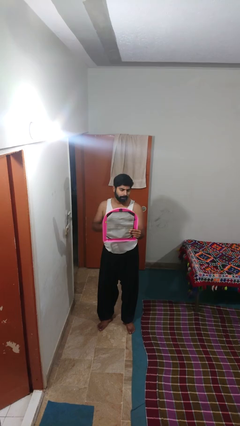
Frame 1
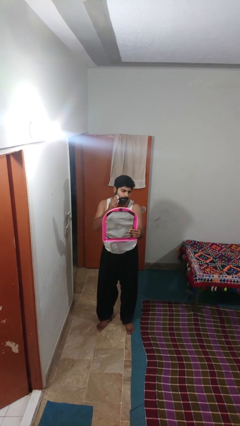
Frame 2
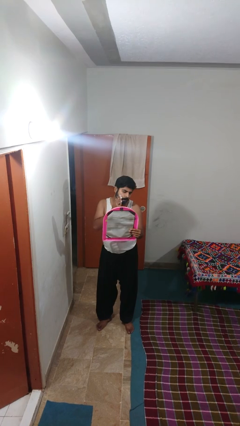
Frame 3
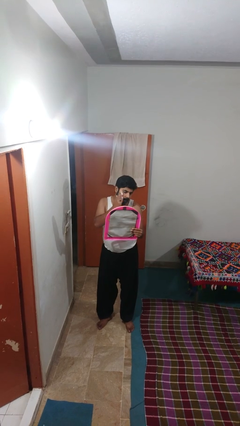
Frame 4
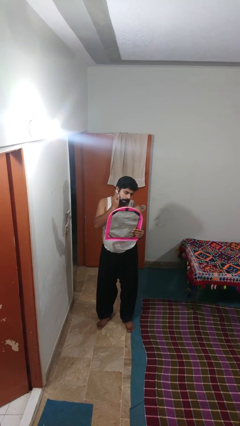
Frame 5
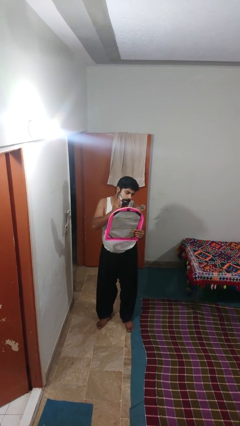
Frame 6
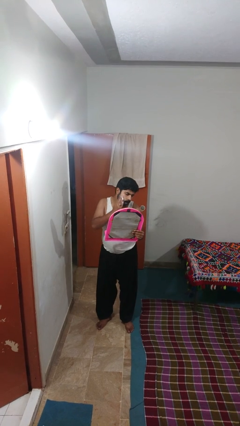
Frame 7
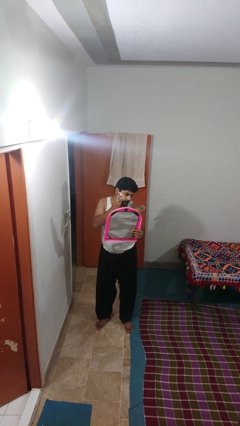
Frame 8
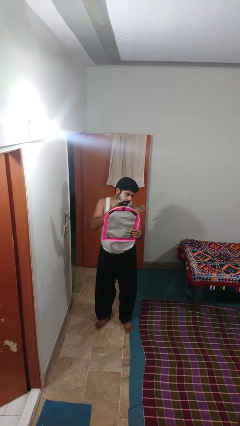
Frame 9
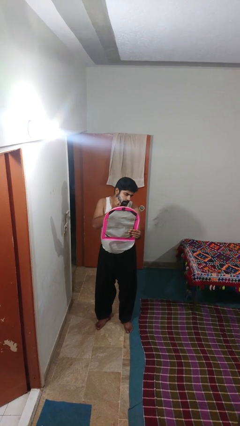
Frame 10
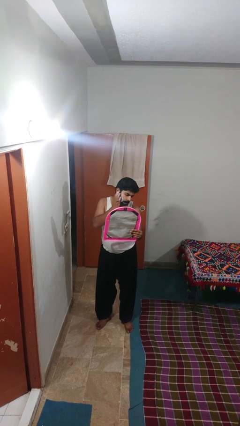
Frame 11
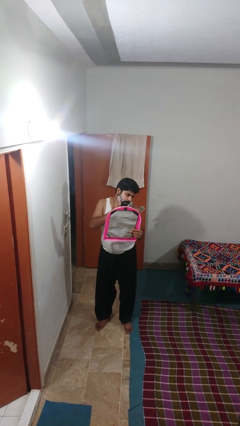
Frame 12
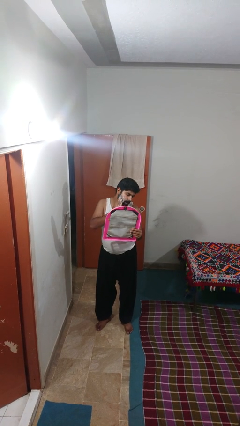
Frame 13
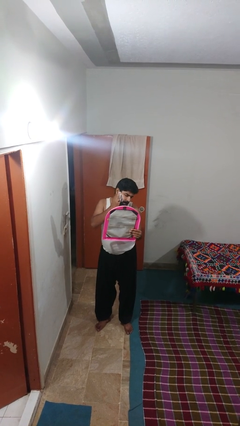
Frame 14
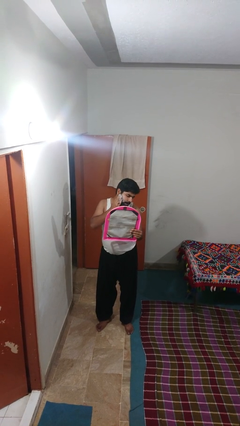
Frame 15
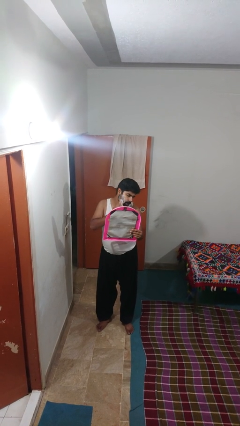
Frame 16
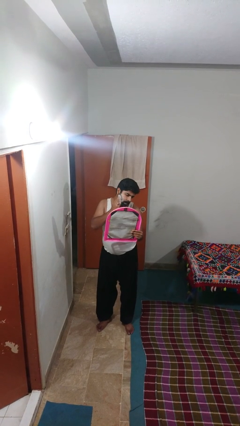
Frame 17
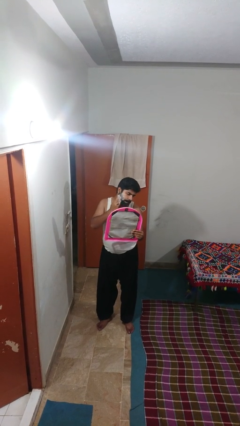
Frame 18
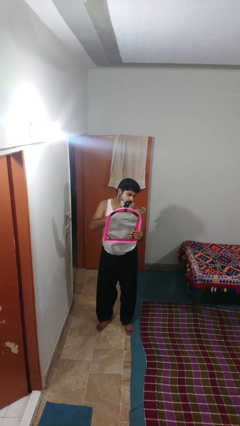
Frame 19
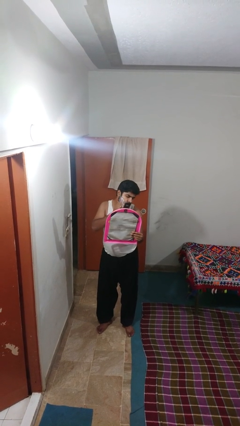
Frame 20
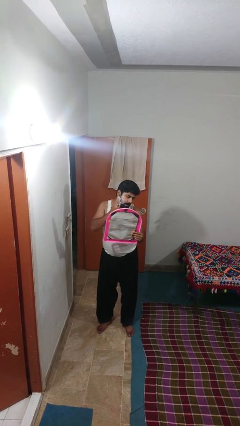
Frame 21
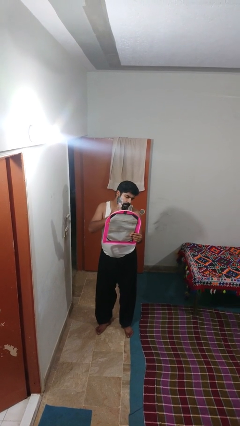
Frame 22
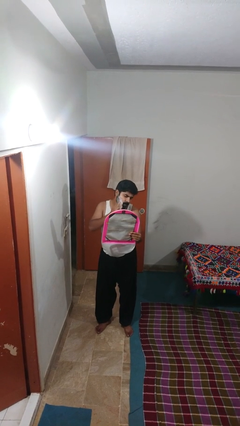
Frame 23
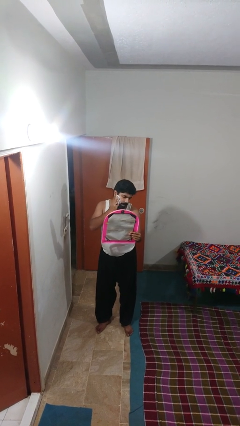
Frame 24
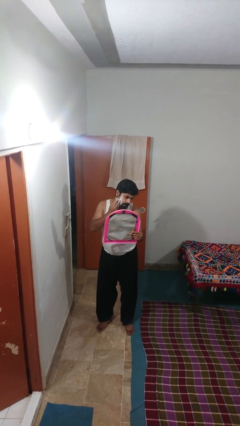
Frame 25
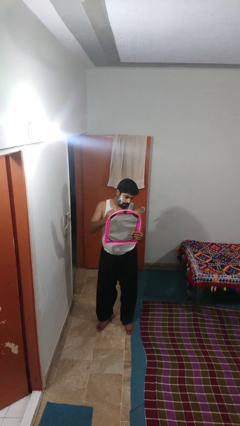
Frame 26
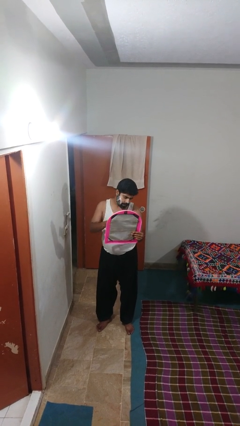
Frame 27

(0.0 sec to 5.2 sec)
person applies shaving cream

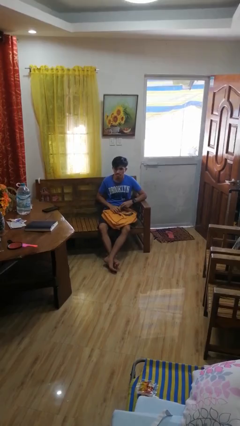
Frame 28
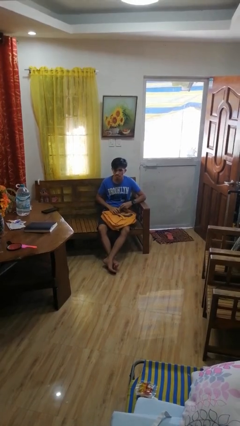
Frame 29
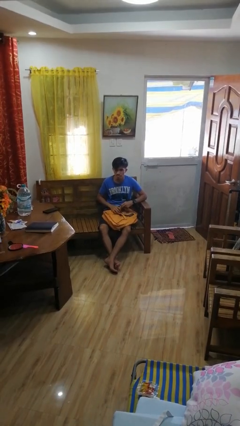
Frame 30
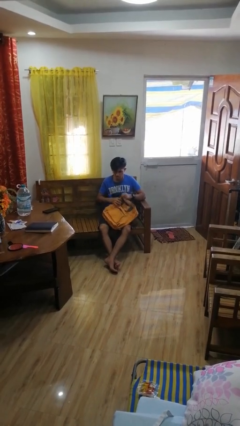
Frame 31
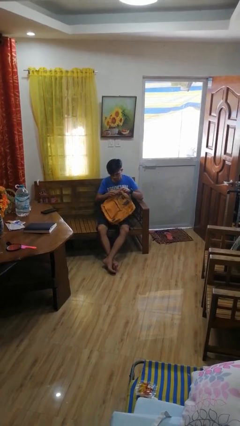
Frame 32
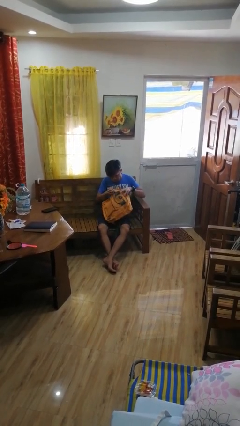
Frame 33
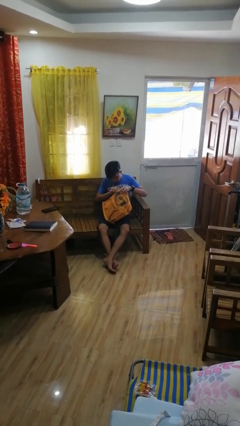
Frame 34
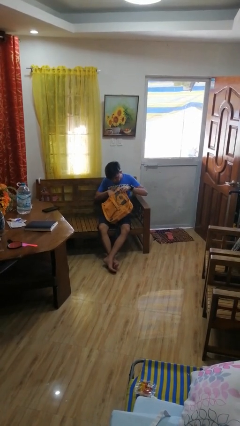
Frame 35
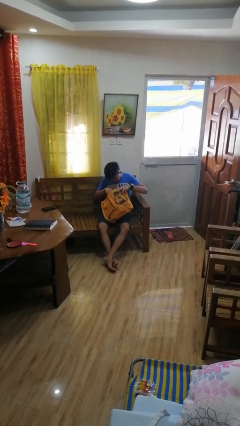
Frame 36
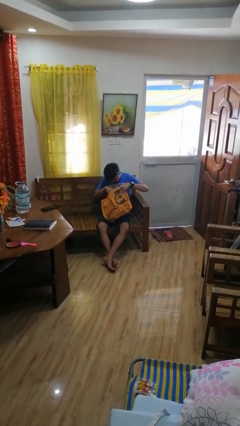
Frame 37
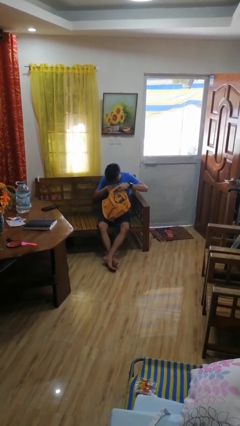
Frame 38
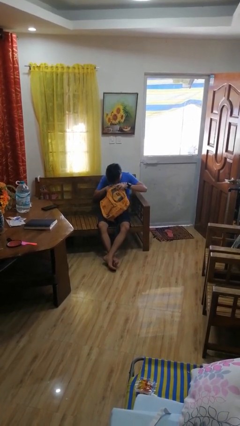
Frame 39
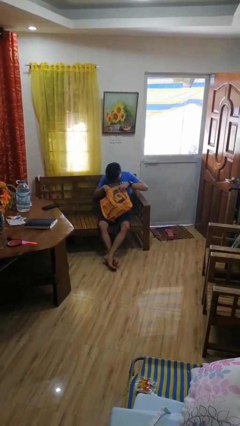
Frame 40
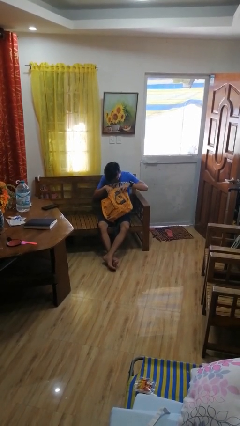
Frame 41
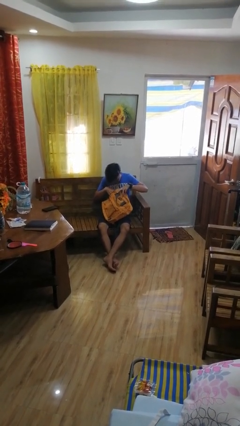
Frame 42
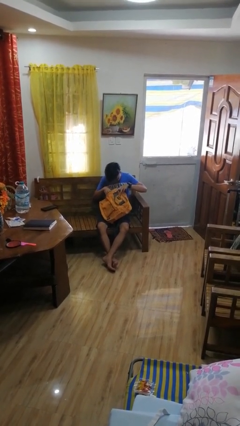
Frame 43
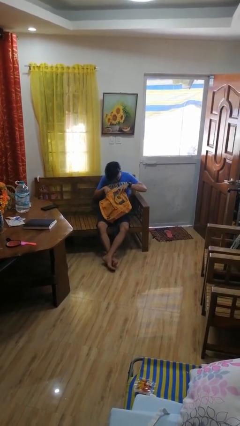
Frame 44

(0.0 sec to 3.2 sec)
person searches in backpack

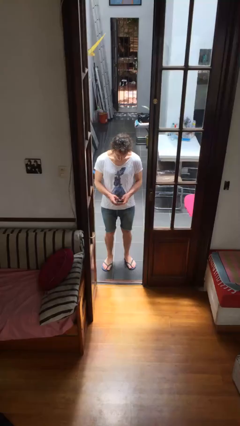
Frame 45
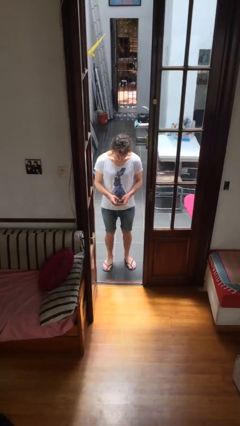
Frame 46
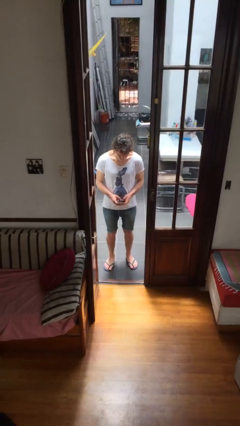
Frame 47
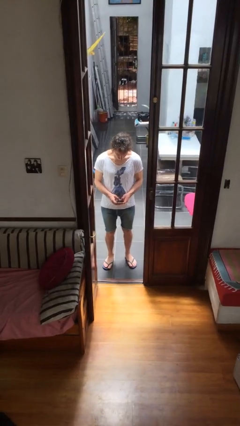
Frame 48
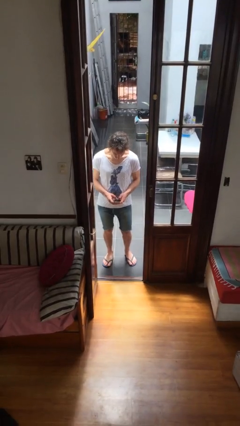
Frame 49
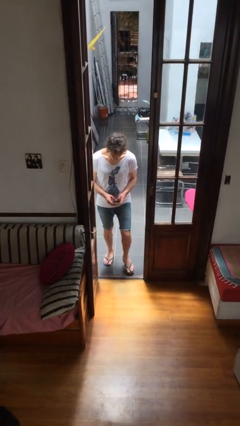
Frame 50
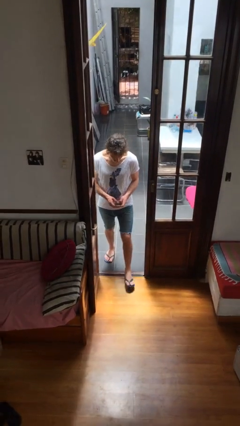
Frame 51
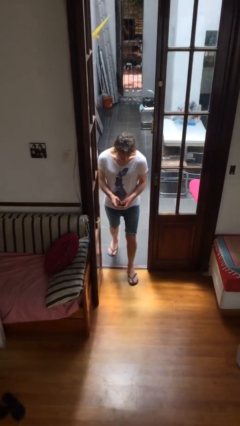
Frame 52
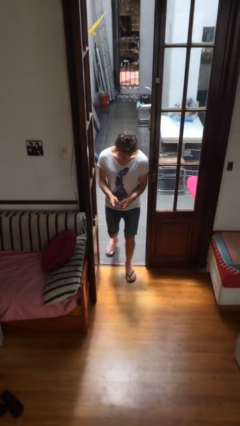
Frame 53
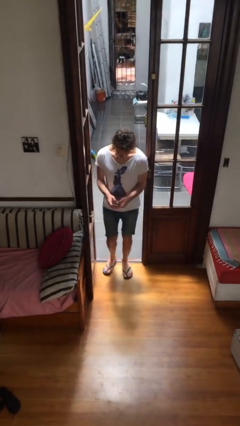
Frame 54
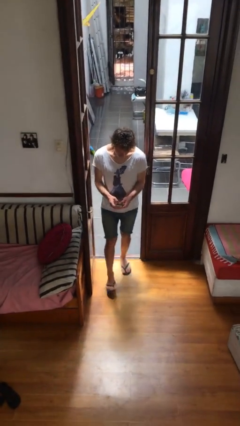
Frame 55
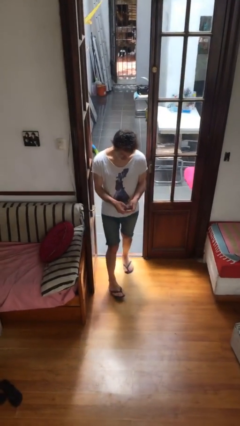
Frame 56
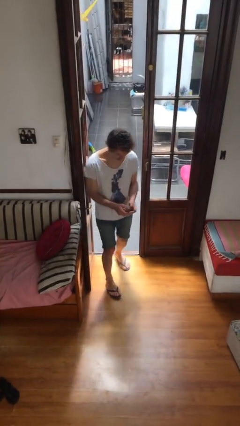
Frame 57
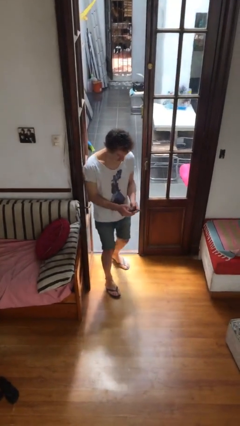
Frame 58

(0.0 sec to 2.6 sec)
person enters scene through structure

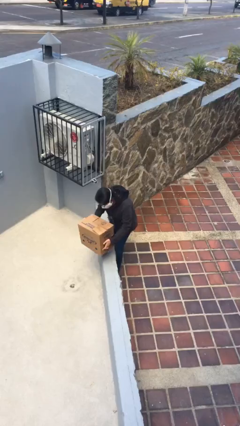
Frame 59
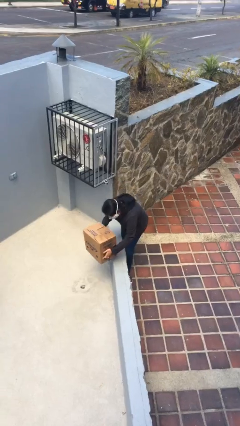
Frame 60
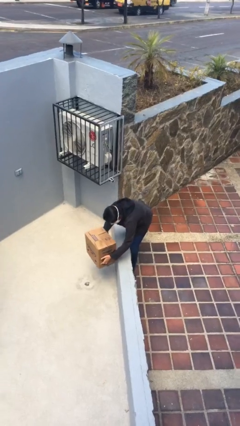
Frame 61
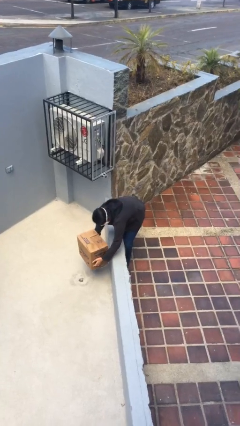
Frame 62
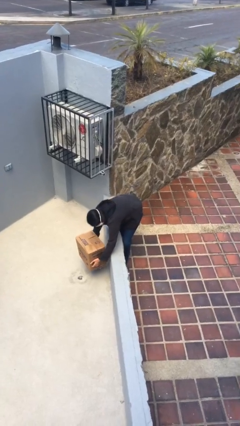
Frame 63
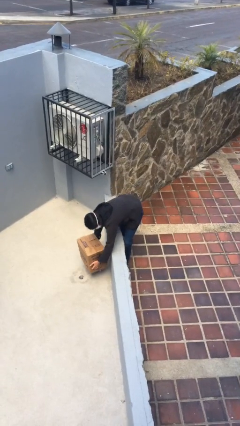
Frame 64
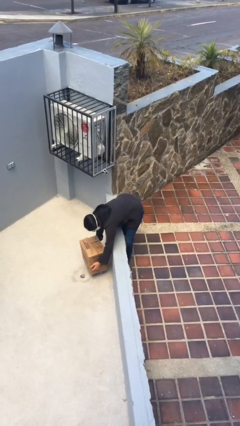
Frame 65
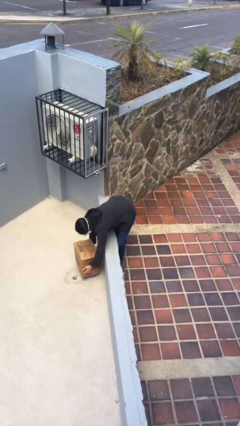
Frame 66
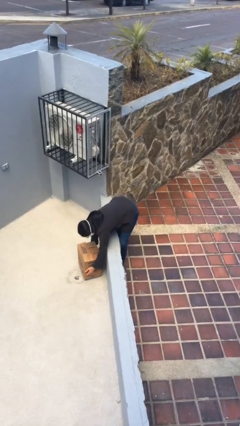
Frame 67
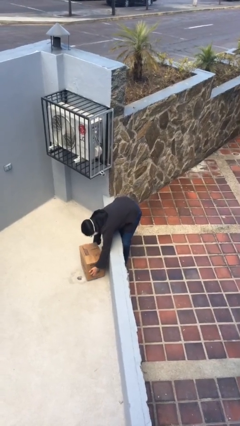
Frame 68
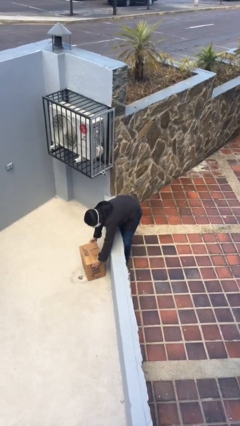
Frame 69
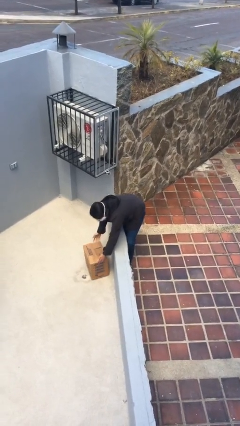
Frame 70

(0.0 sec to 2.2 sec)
person puts down object on floor

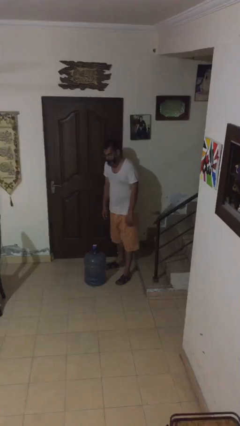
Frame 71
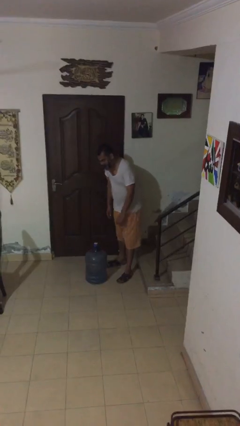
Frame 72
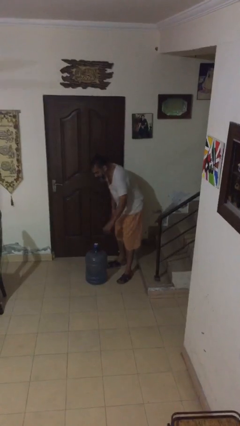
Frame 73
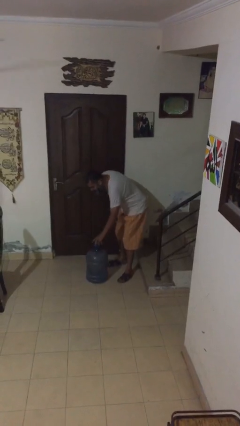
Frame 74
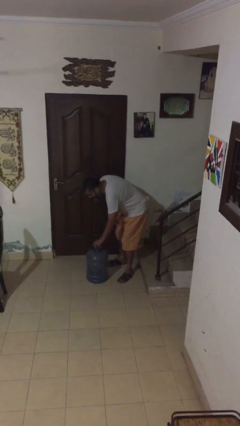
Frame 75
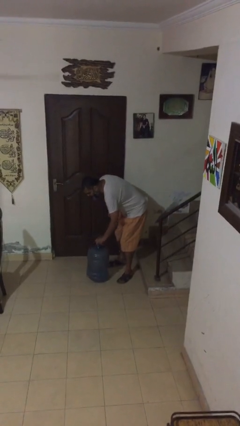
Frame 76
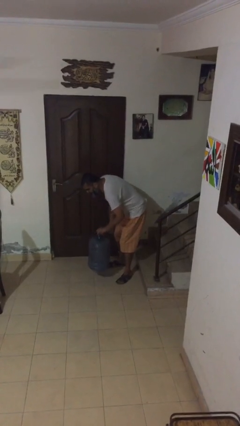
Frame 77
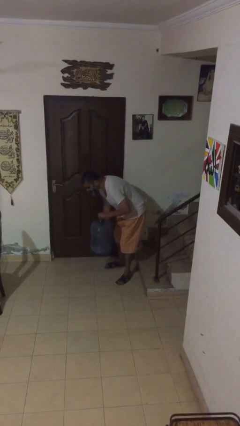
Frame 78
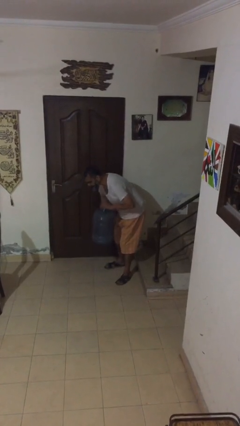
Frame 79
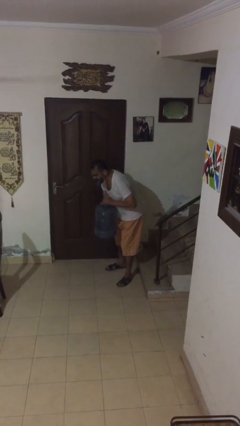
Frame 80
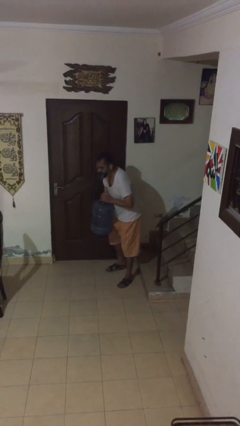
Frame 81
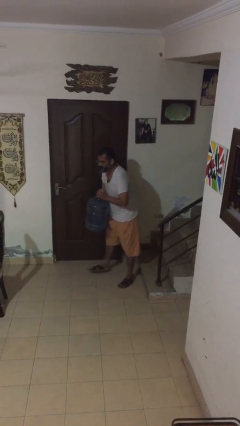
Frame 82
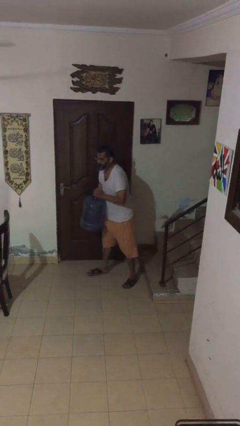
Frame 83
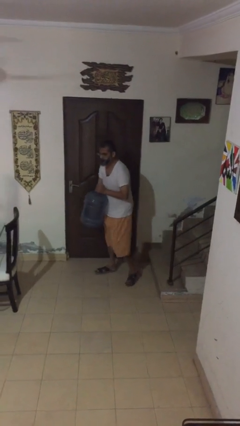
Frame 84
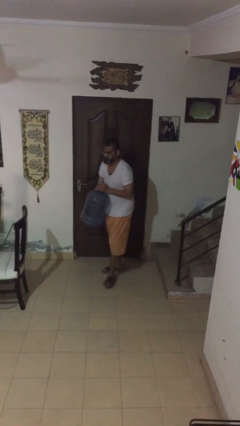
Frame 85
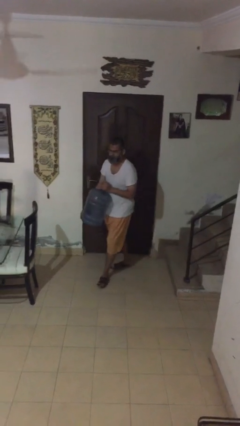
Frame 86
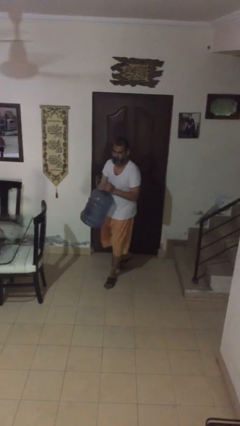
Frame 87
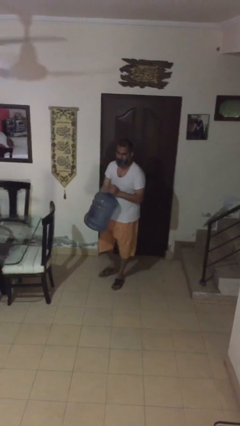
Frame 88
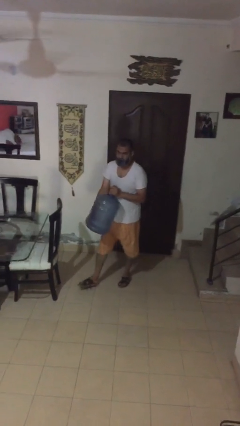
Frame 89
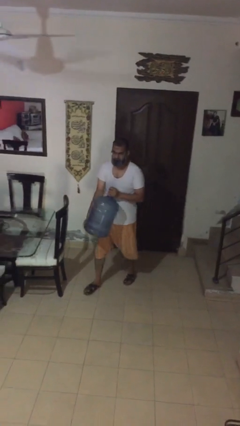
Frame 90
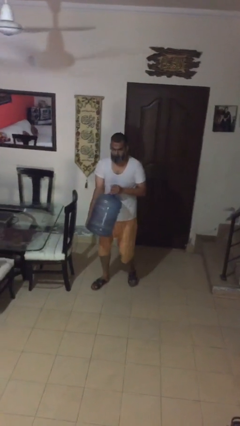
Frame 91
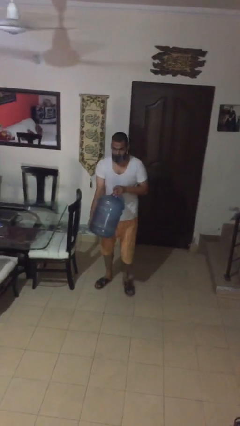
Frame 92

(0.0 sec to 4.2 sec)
person carries heavy object

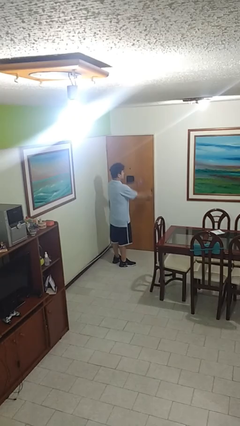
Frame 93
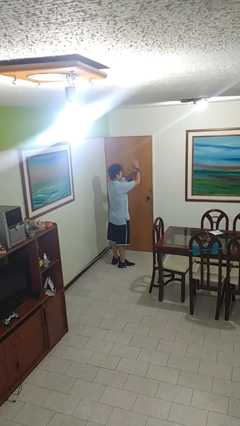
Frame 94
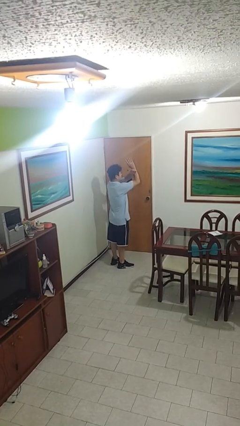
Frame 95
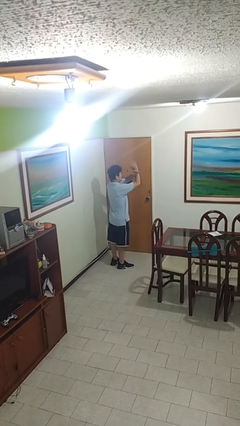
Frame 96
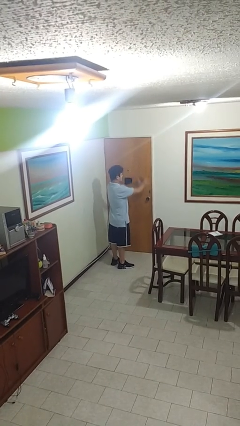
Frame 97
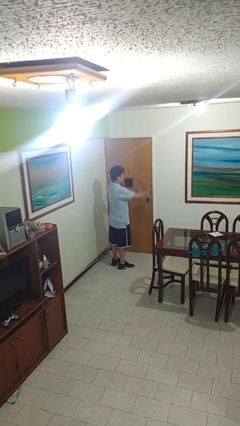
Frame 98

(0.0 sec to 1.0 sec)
person gestures arms x
